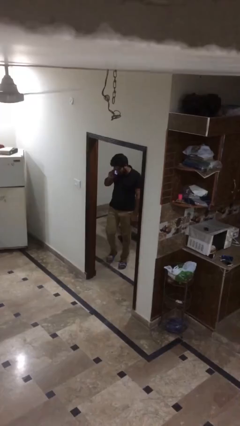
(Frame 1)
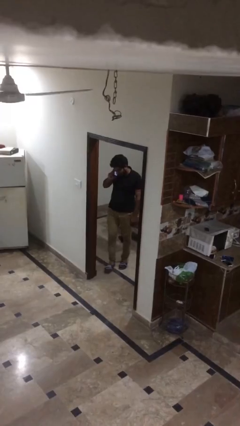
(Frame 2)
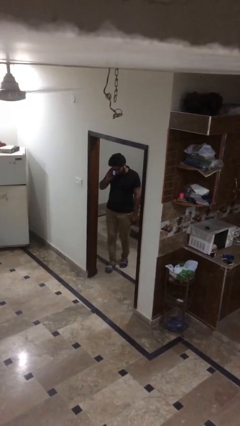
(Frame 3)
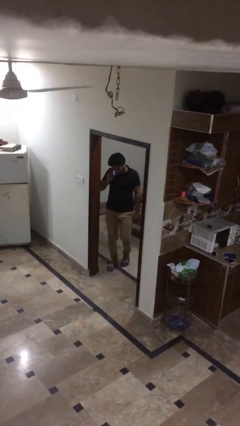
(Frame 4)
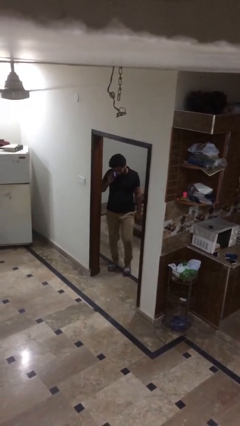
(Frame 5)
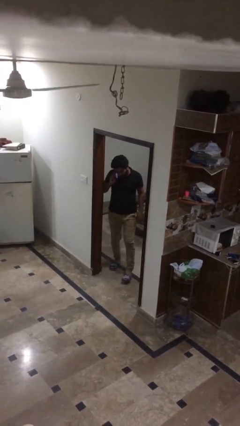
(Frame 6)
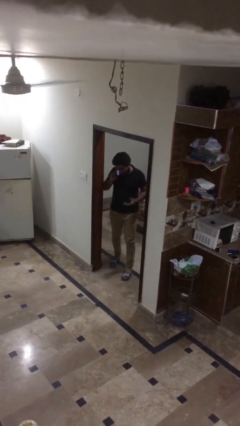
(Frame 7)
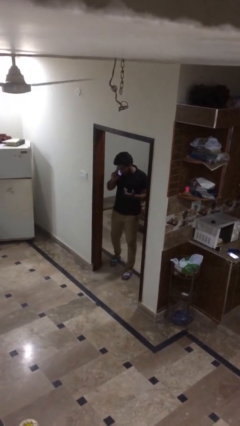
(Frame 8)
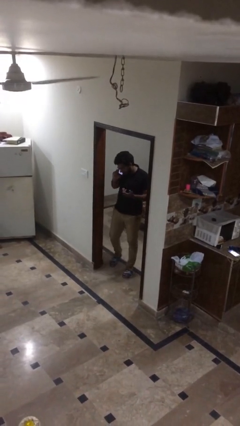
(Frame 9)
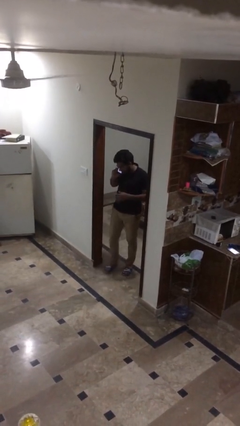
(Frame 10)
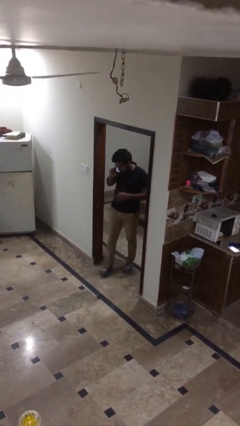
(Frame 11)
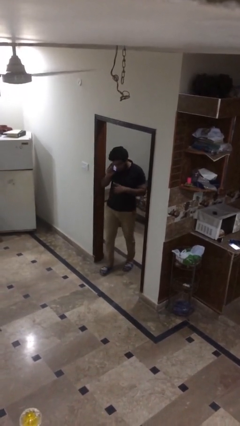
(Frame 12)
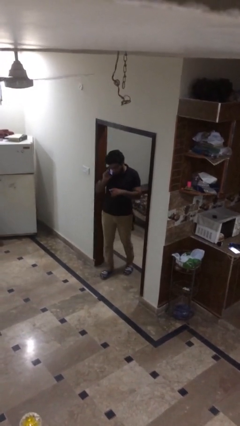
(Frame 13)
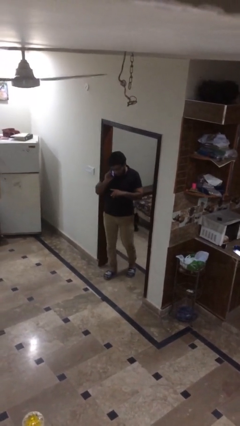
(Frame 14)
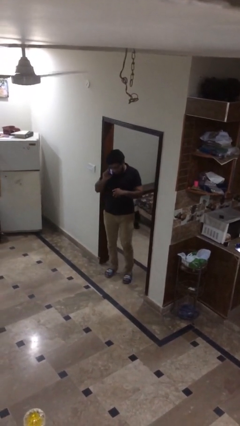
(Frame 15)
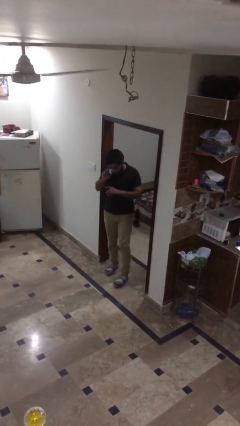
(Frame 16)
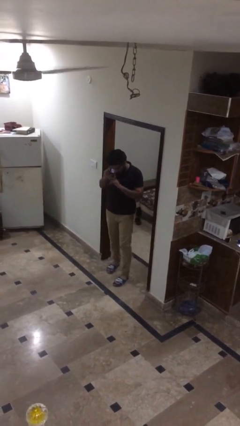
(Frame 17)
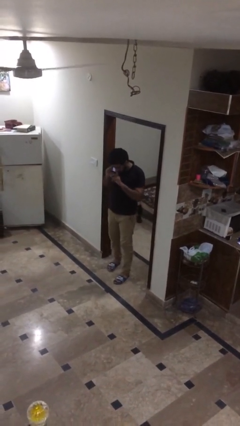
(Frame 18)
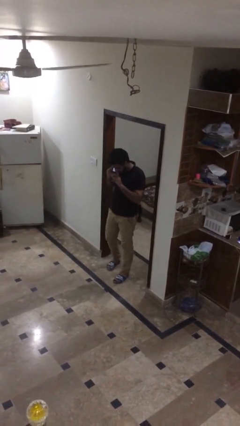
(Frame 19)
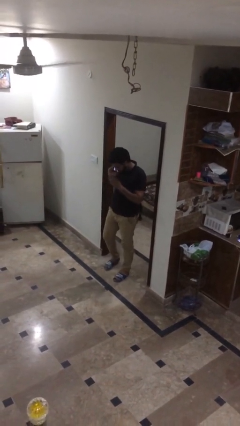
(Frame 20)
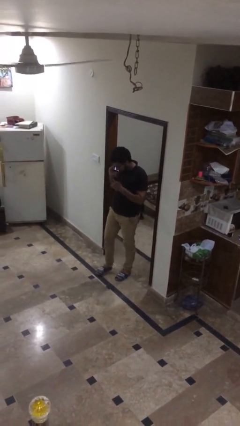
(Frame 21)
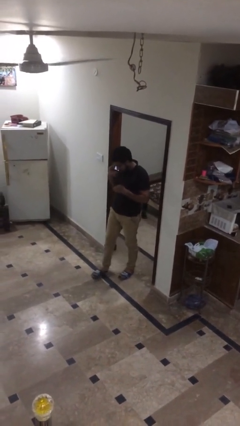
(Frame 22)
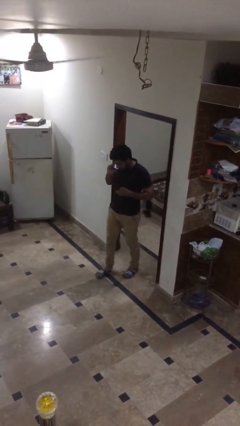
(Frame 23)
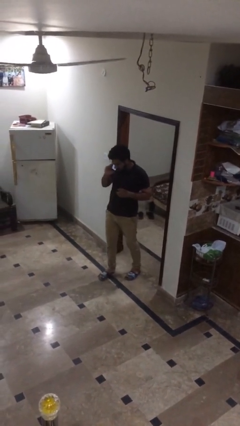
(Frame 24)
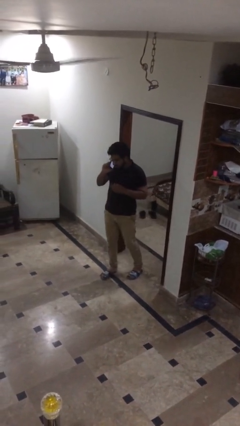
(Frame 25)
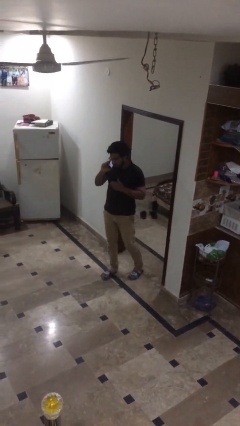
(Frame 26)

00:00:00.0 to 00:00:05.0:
person enters scene through structure

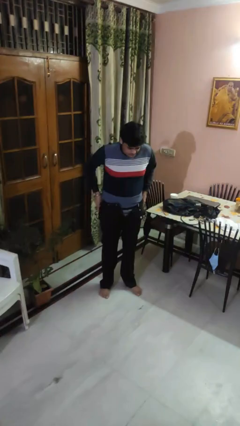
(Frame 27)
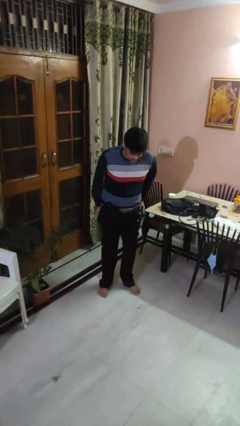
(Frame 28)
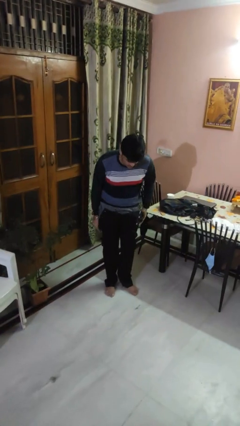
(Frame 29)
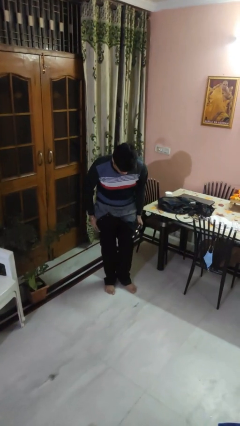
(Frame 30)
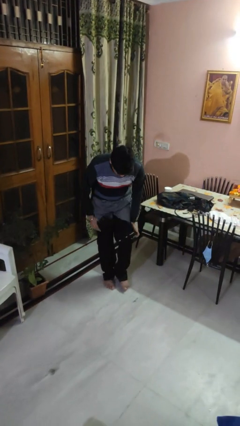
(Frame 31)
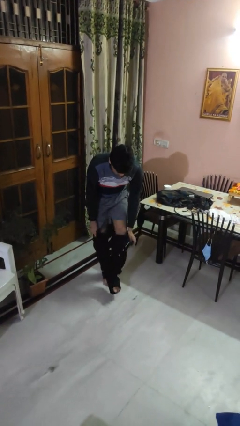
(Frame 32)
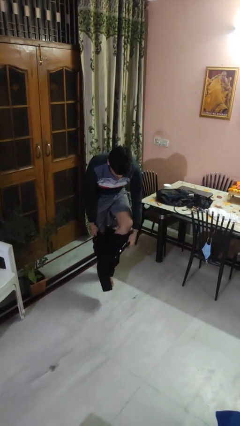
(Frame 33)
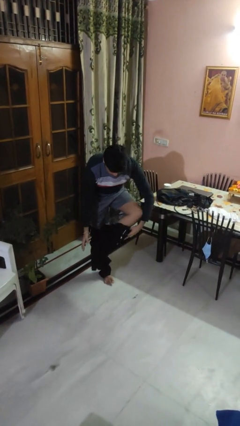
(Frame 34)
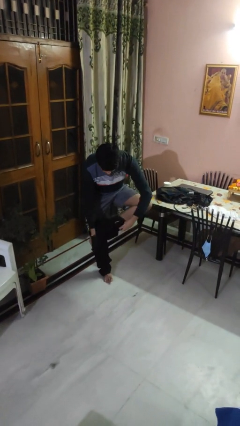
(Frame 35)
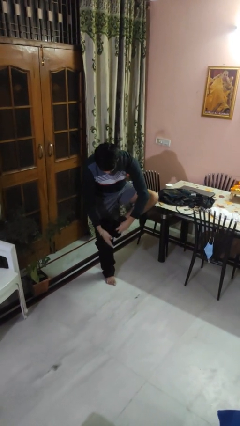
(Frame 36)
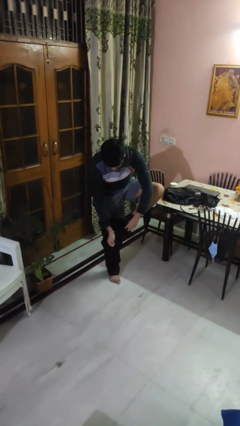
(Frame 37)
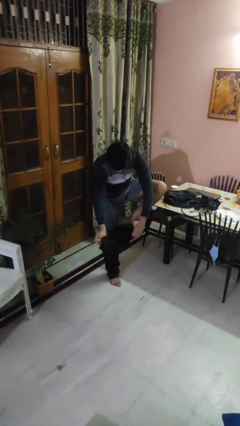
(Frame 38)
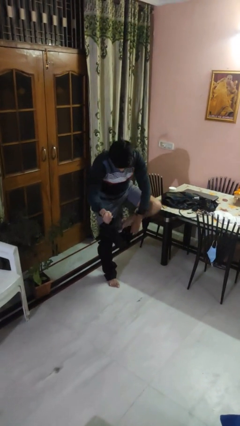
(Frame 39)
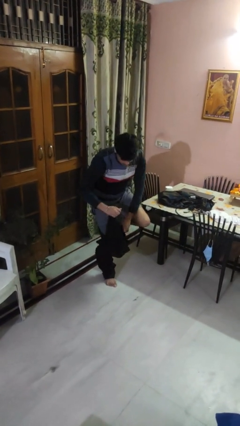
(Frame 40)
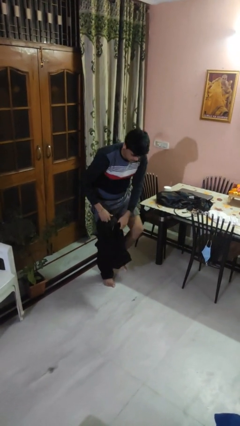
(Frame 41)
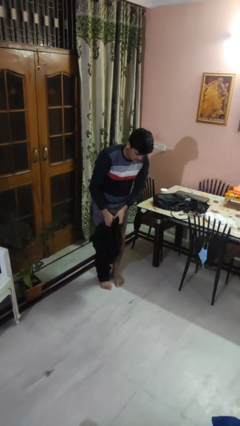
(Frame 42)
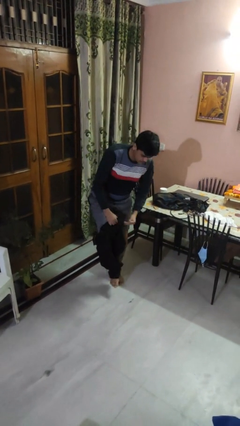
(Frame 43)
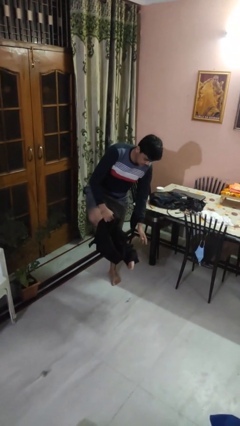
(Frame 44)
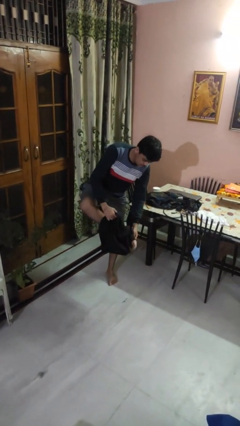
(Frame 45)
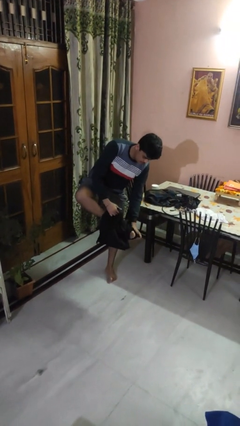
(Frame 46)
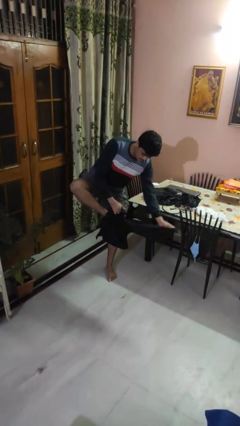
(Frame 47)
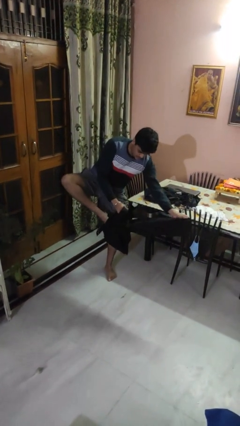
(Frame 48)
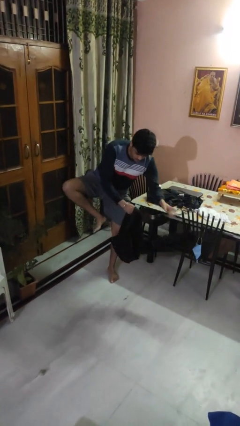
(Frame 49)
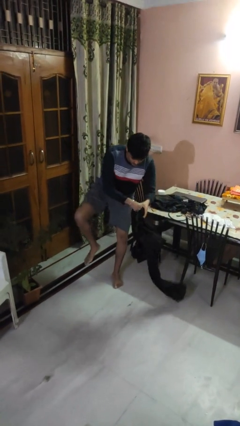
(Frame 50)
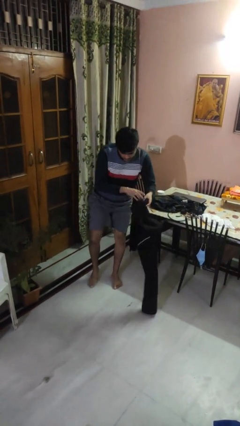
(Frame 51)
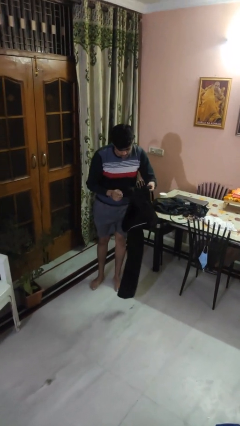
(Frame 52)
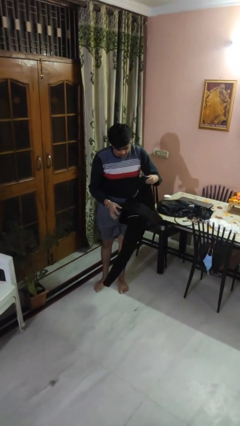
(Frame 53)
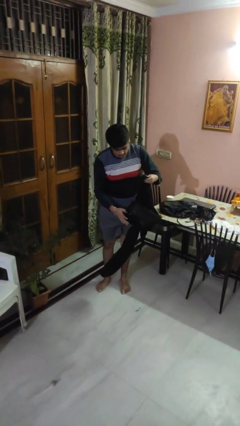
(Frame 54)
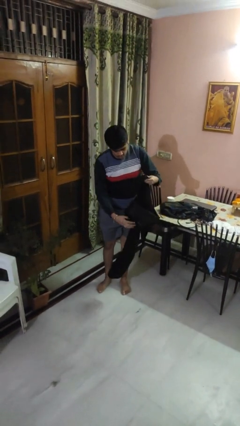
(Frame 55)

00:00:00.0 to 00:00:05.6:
person takes off pants

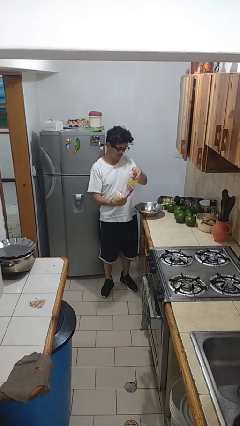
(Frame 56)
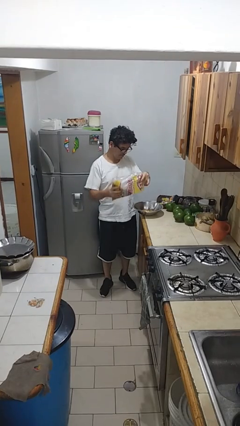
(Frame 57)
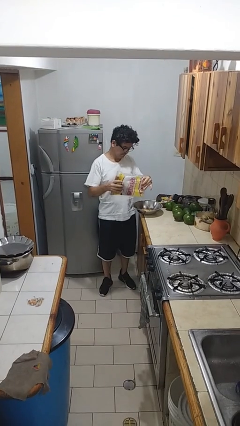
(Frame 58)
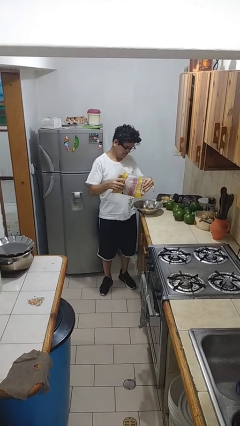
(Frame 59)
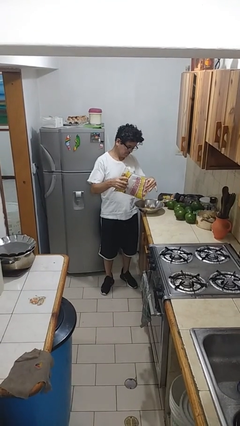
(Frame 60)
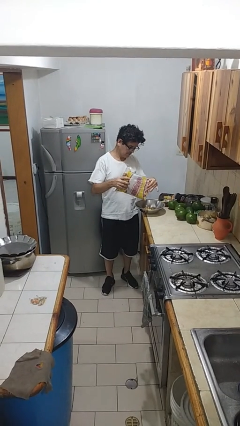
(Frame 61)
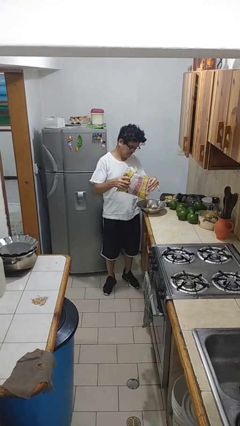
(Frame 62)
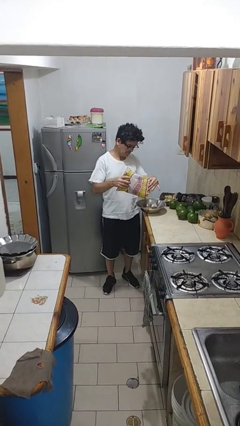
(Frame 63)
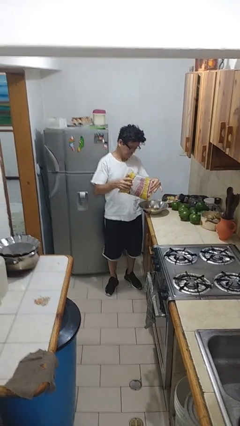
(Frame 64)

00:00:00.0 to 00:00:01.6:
person pours into bowl

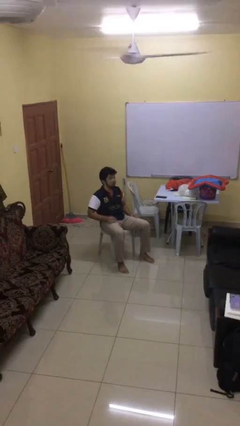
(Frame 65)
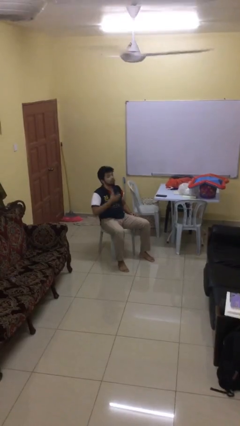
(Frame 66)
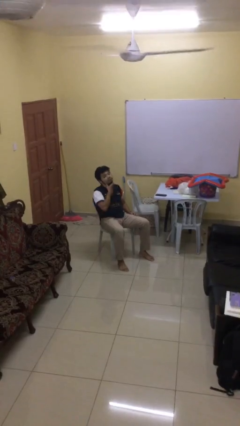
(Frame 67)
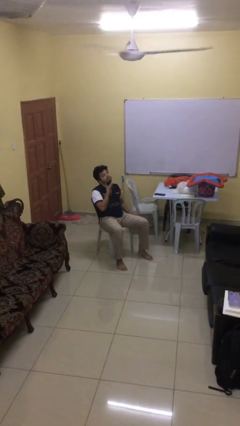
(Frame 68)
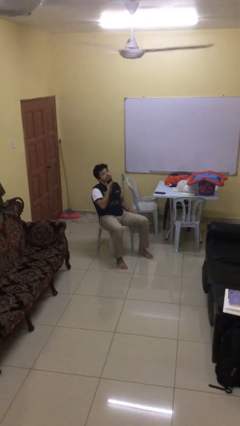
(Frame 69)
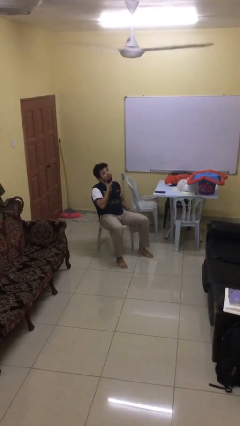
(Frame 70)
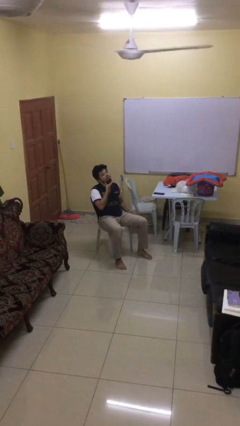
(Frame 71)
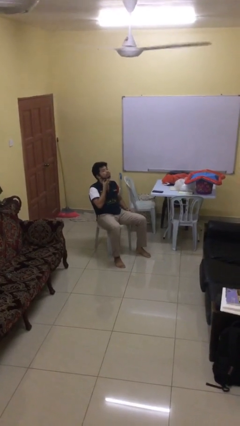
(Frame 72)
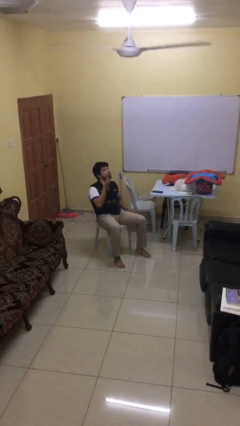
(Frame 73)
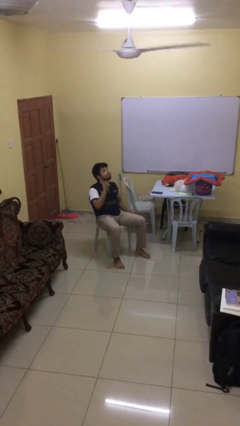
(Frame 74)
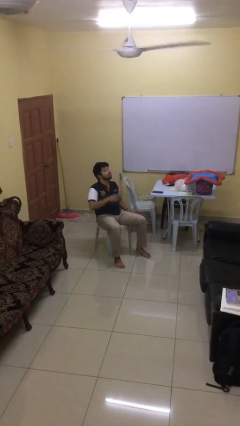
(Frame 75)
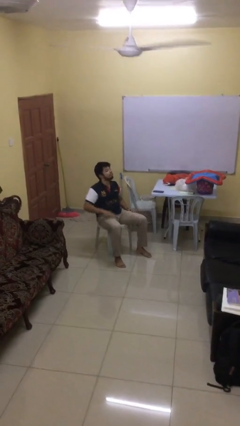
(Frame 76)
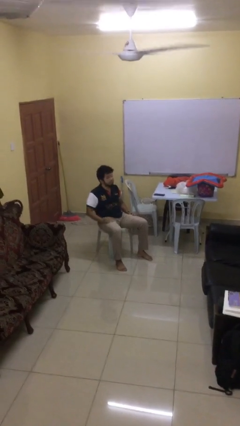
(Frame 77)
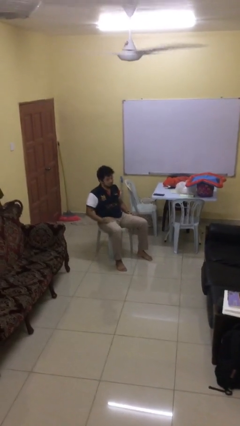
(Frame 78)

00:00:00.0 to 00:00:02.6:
person scratches face

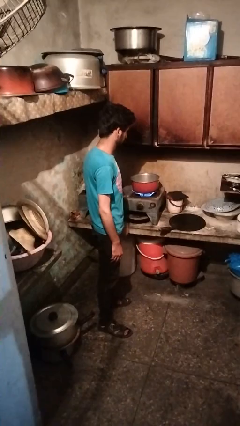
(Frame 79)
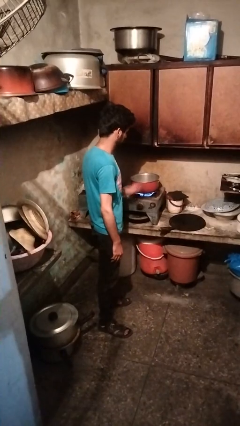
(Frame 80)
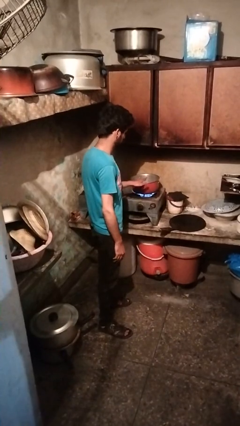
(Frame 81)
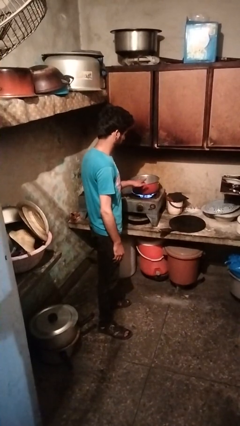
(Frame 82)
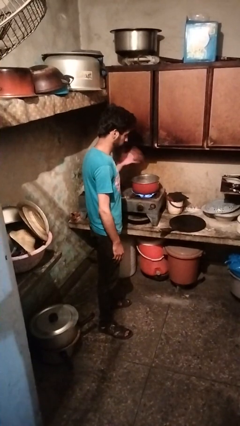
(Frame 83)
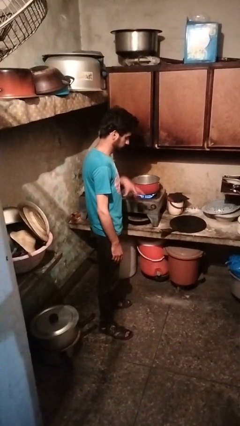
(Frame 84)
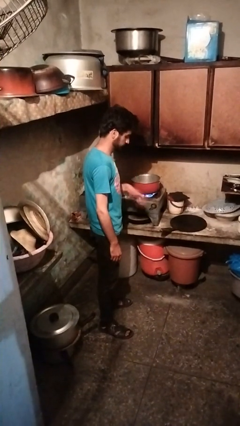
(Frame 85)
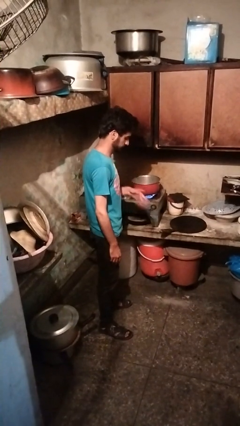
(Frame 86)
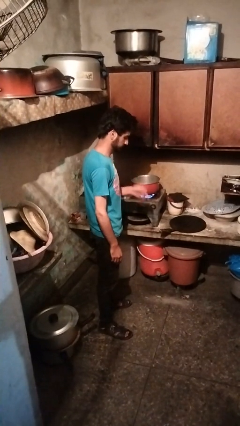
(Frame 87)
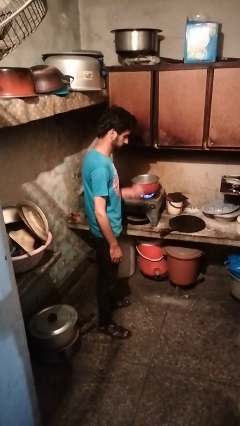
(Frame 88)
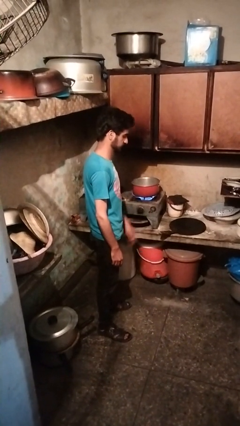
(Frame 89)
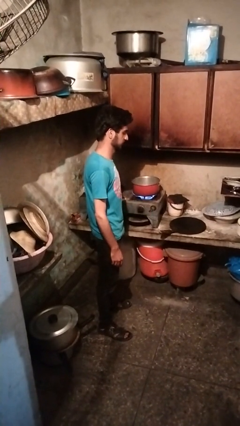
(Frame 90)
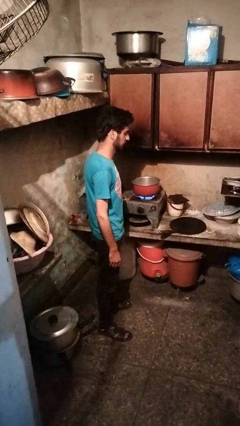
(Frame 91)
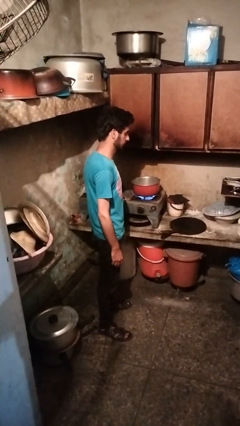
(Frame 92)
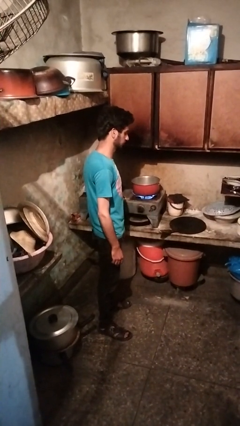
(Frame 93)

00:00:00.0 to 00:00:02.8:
person burns hand
